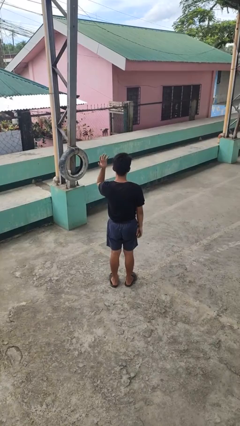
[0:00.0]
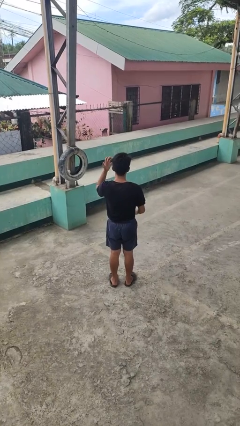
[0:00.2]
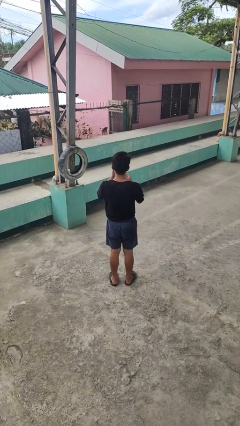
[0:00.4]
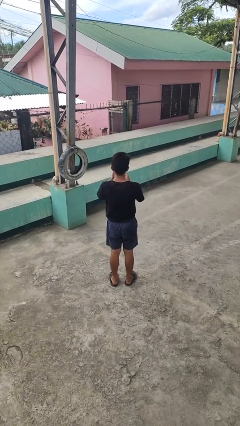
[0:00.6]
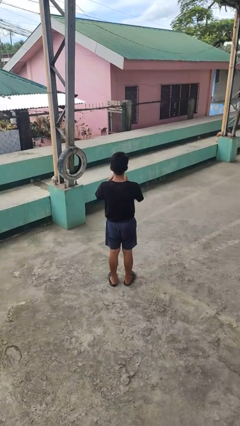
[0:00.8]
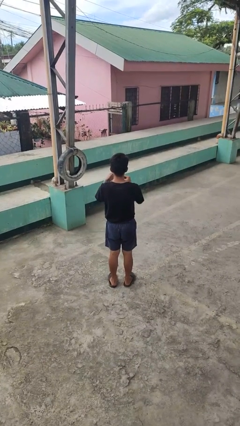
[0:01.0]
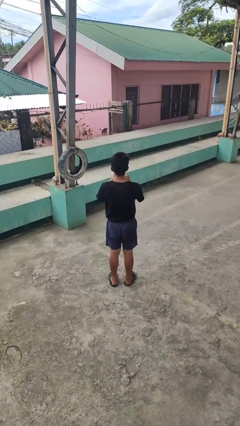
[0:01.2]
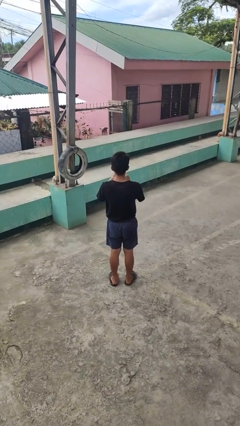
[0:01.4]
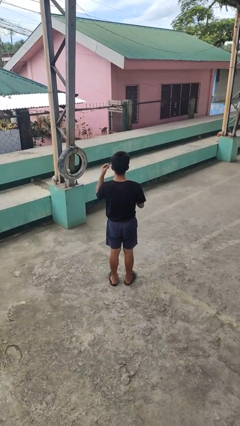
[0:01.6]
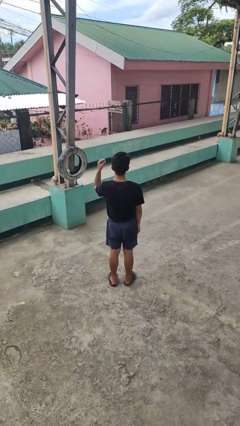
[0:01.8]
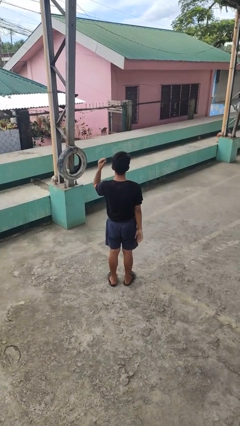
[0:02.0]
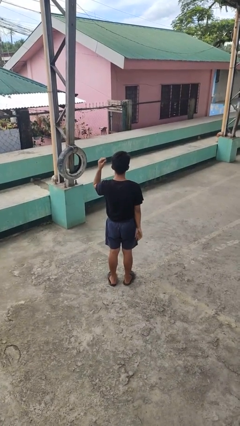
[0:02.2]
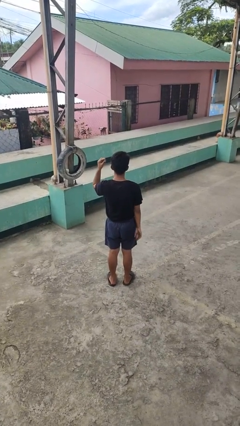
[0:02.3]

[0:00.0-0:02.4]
person takes off ring

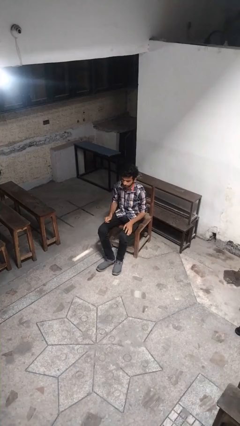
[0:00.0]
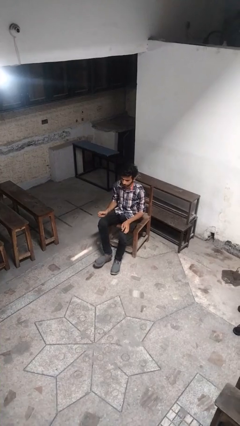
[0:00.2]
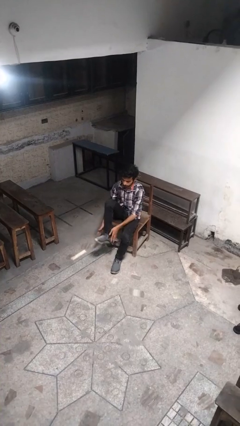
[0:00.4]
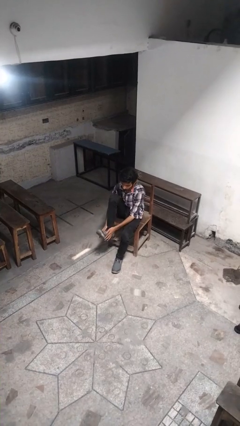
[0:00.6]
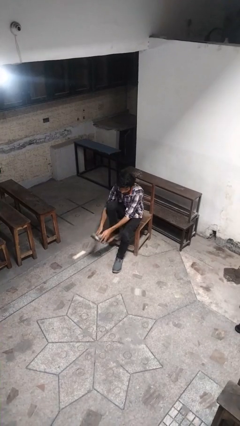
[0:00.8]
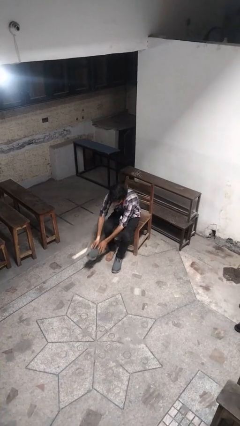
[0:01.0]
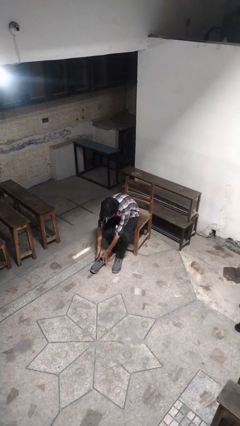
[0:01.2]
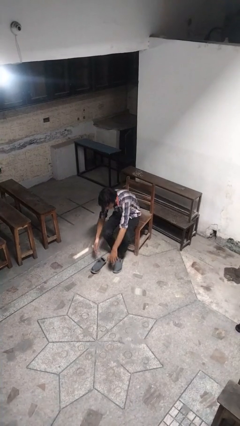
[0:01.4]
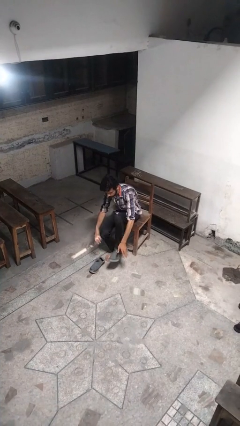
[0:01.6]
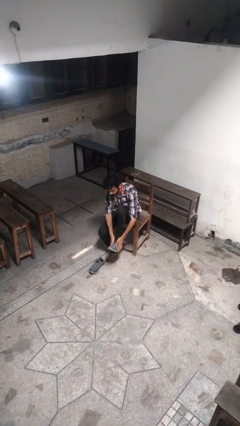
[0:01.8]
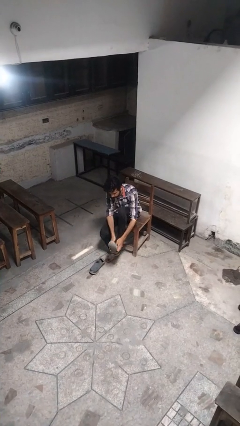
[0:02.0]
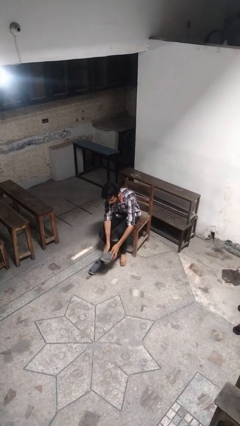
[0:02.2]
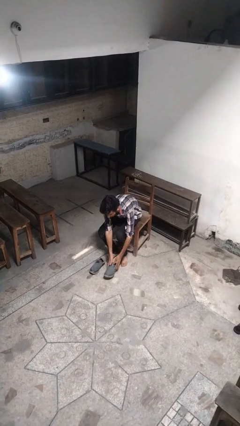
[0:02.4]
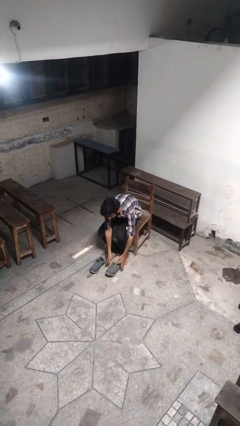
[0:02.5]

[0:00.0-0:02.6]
person takes off shoes

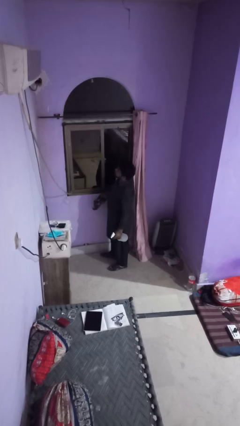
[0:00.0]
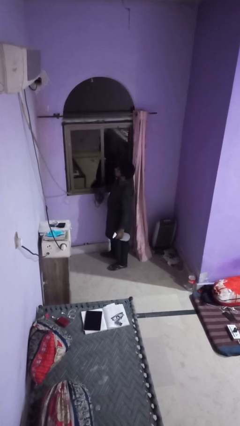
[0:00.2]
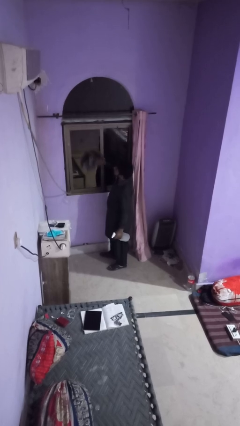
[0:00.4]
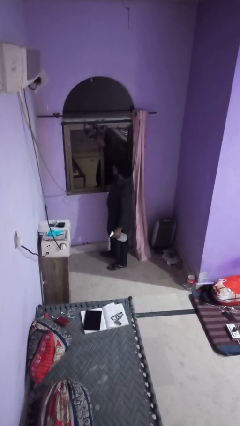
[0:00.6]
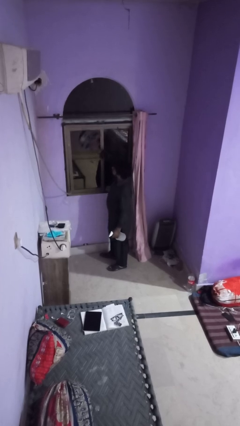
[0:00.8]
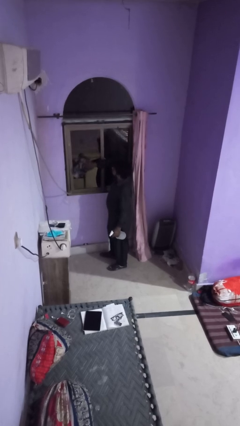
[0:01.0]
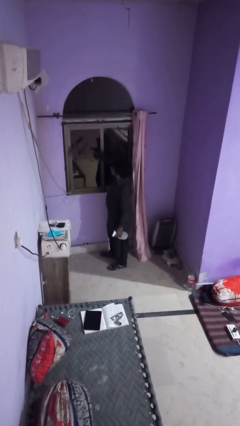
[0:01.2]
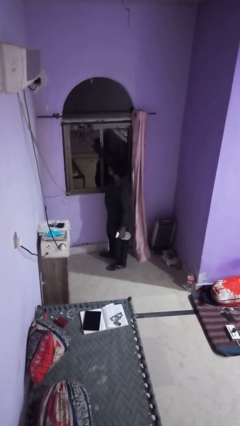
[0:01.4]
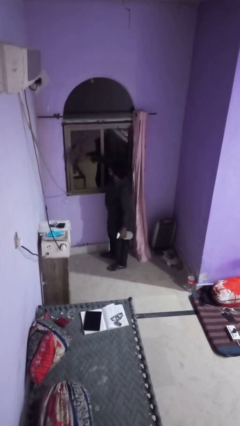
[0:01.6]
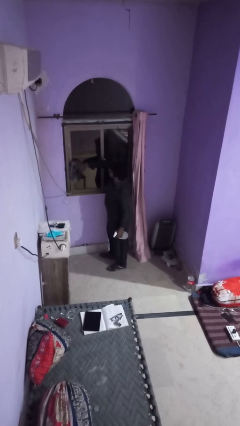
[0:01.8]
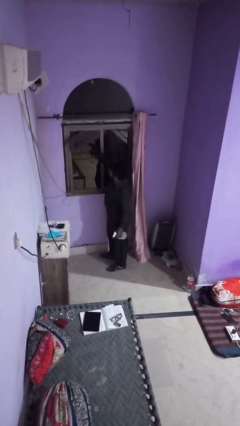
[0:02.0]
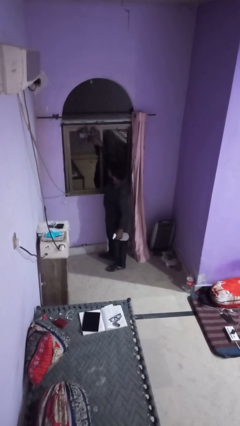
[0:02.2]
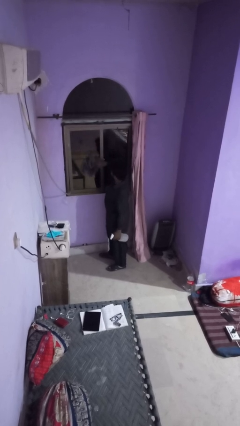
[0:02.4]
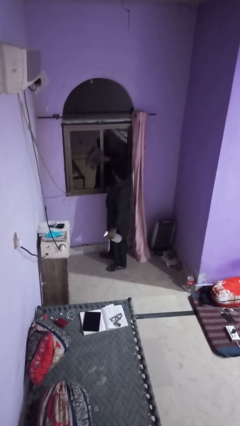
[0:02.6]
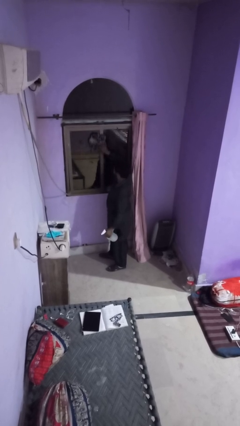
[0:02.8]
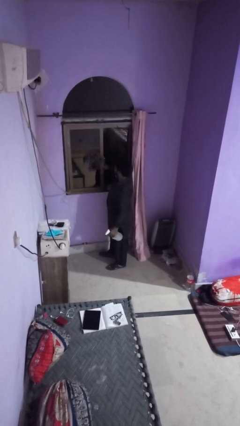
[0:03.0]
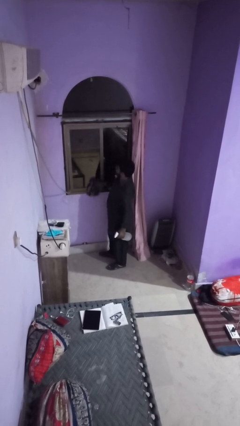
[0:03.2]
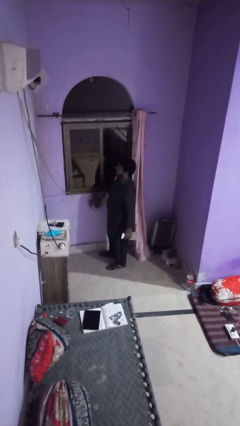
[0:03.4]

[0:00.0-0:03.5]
person washes window

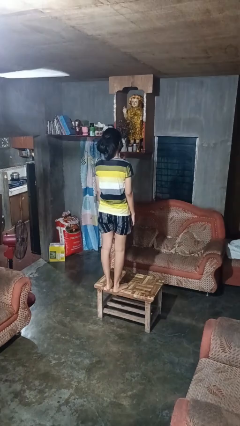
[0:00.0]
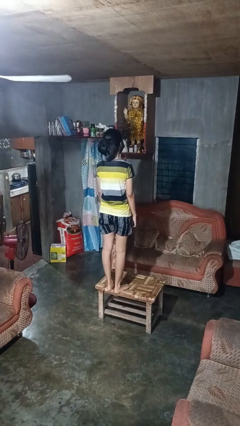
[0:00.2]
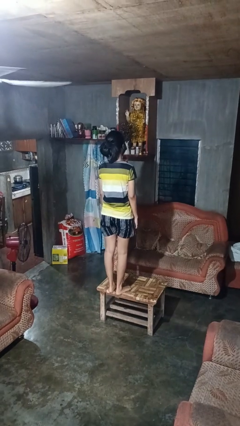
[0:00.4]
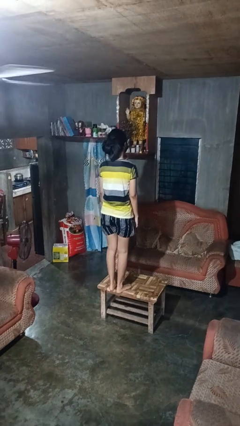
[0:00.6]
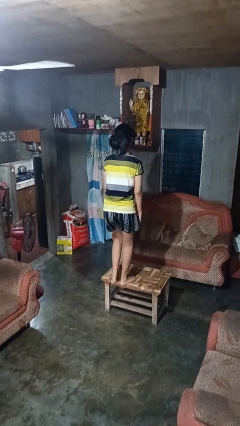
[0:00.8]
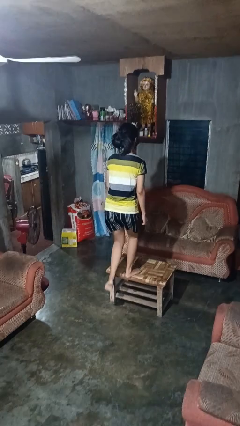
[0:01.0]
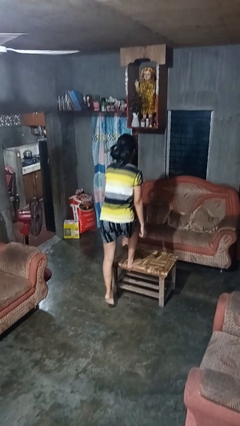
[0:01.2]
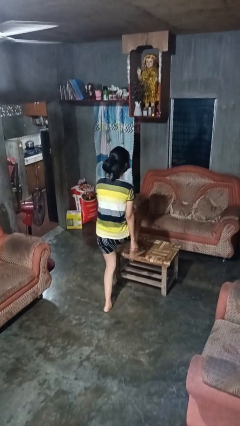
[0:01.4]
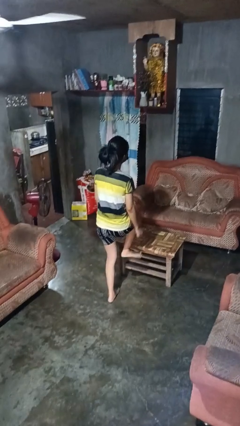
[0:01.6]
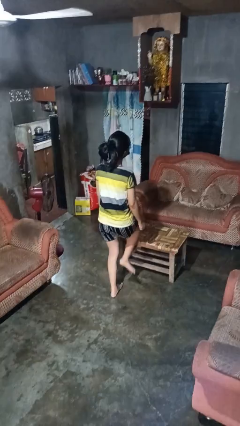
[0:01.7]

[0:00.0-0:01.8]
person climbs off table

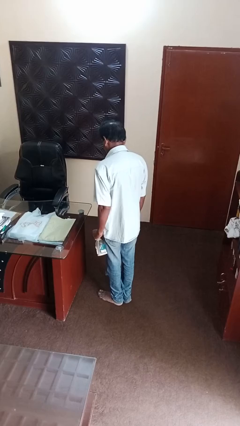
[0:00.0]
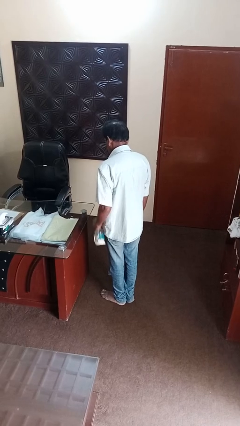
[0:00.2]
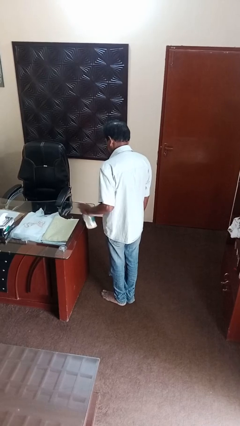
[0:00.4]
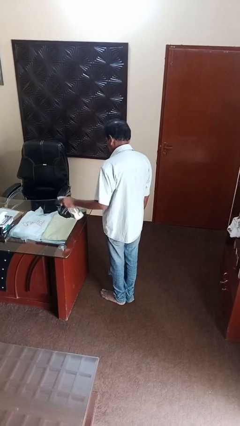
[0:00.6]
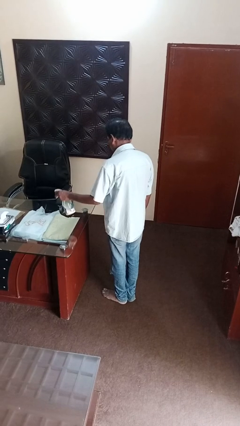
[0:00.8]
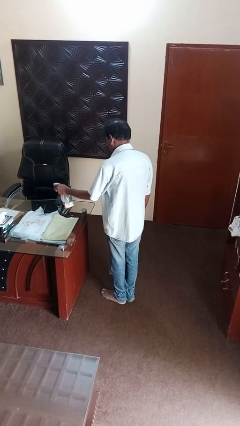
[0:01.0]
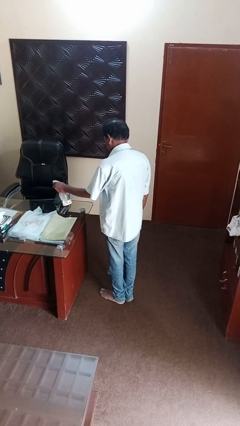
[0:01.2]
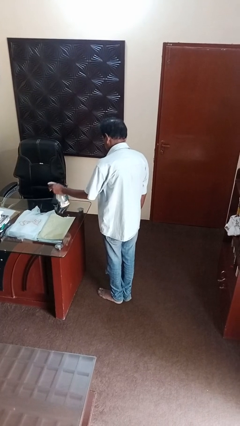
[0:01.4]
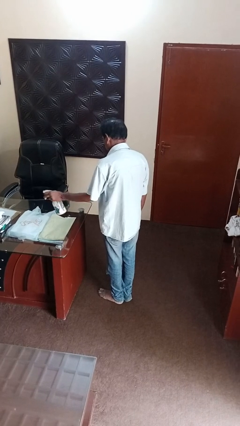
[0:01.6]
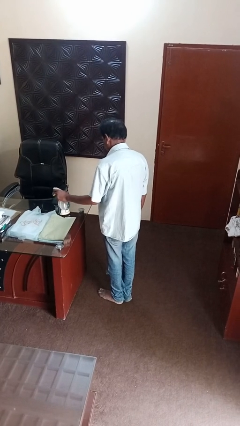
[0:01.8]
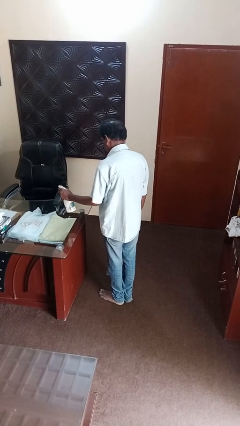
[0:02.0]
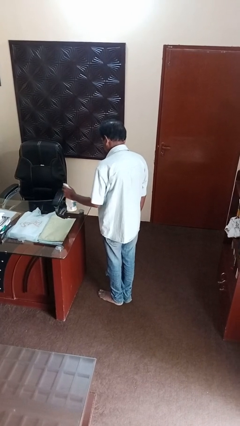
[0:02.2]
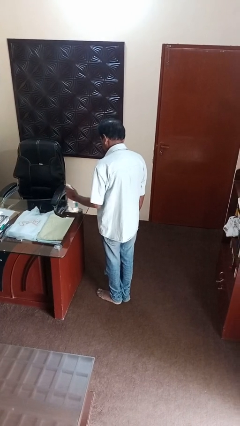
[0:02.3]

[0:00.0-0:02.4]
person sprays from bottle

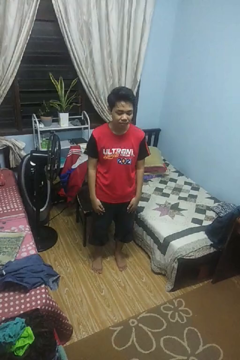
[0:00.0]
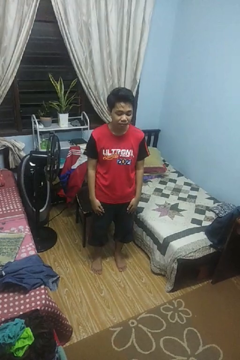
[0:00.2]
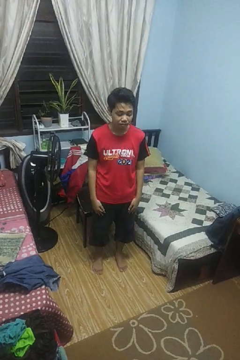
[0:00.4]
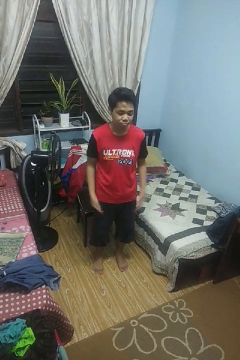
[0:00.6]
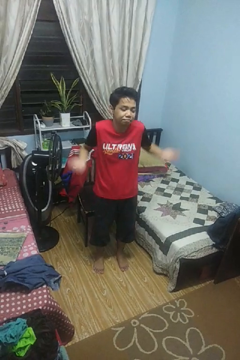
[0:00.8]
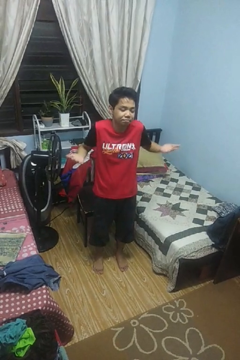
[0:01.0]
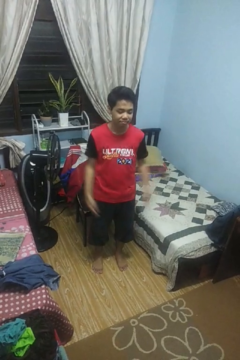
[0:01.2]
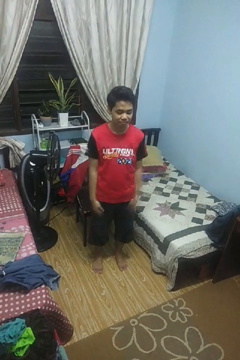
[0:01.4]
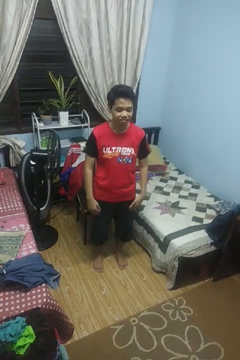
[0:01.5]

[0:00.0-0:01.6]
person shrugs

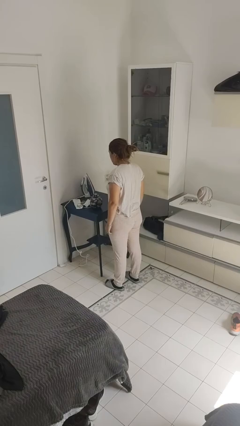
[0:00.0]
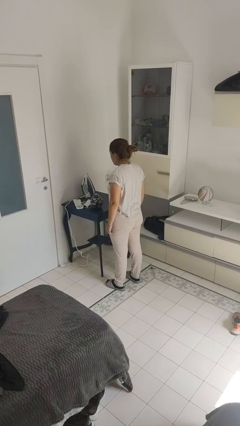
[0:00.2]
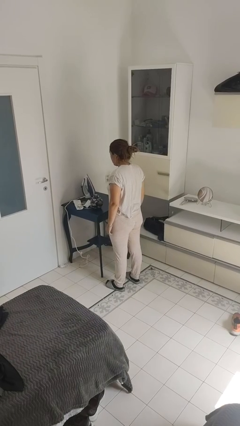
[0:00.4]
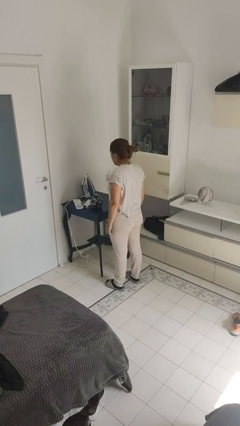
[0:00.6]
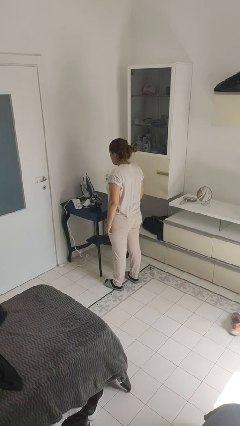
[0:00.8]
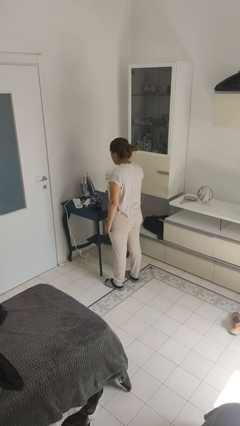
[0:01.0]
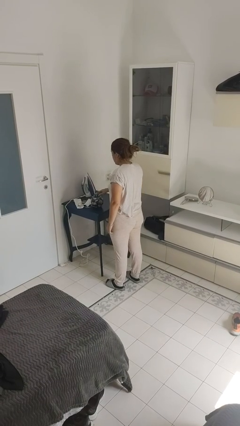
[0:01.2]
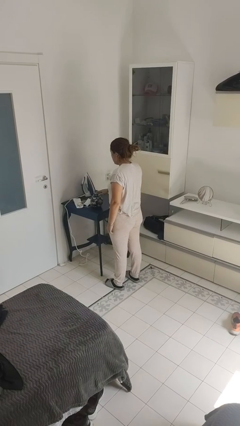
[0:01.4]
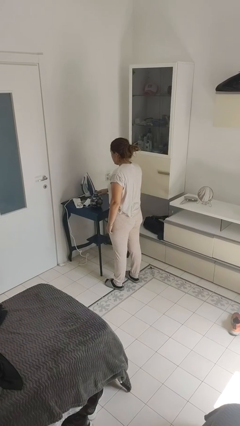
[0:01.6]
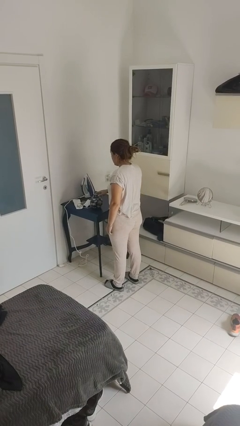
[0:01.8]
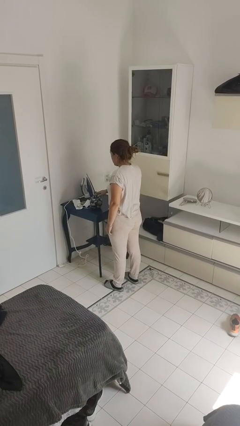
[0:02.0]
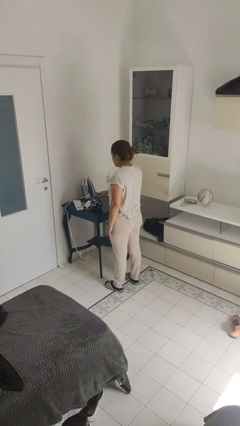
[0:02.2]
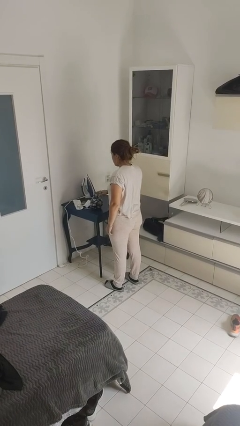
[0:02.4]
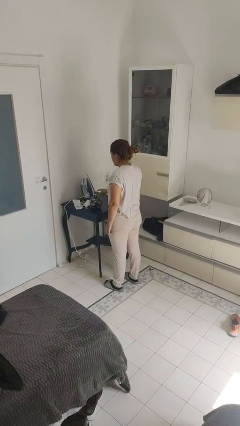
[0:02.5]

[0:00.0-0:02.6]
person taps object with finger

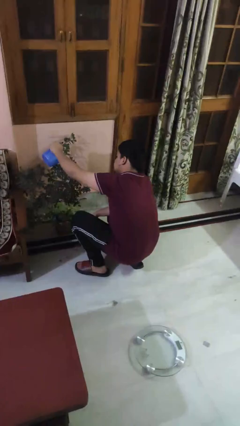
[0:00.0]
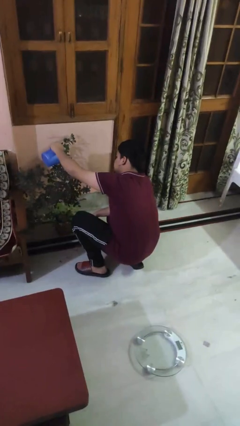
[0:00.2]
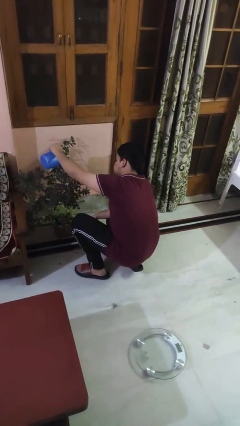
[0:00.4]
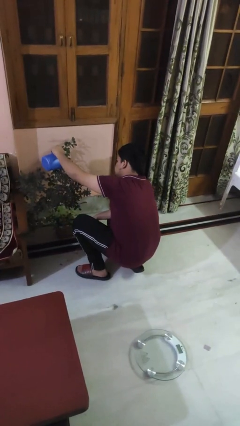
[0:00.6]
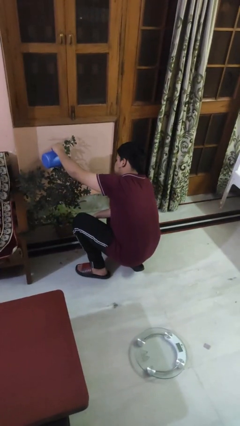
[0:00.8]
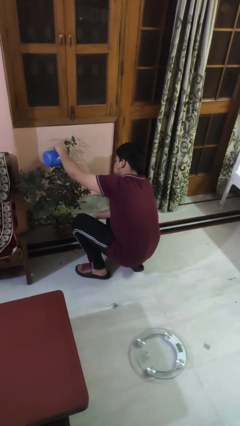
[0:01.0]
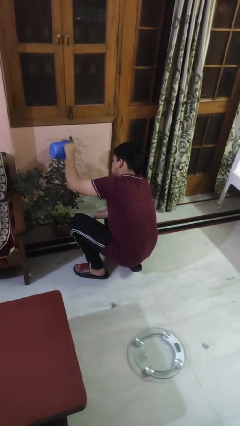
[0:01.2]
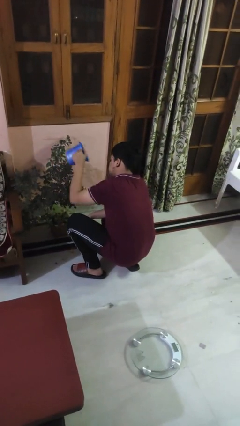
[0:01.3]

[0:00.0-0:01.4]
person waters houseplant
